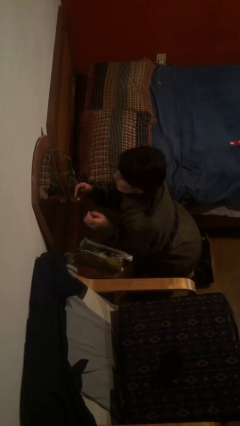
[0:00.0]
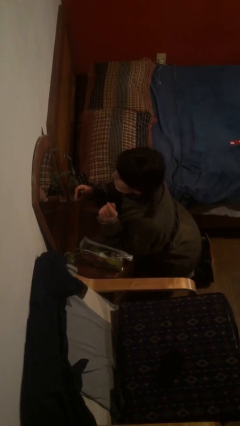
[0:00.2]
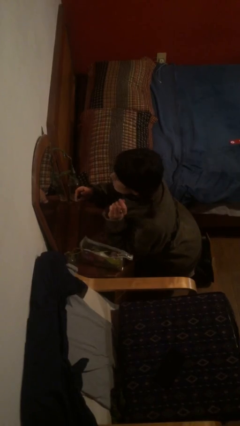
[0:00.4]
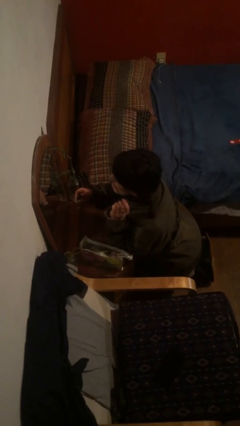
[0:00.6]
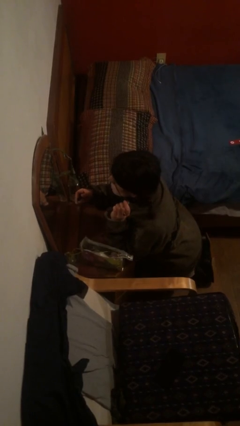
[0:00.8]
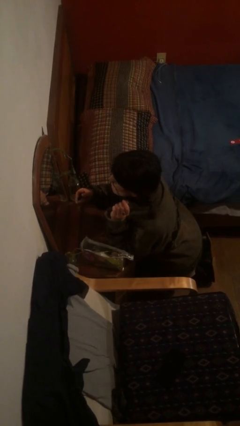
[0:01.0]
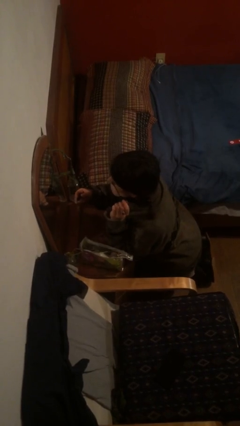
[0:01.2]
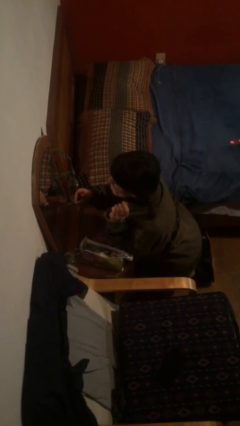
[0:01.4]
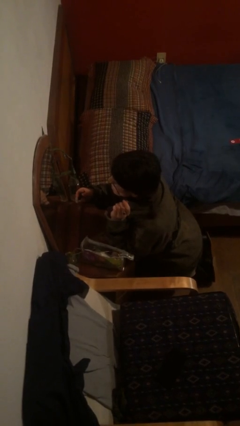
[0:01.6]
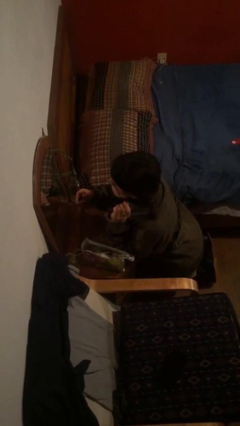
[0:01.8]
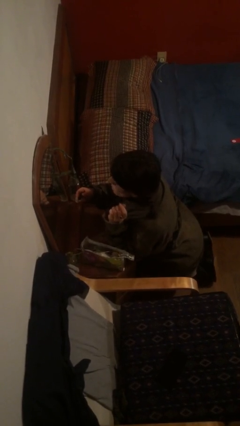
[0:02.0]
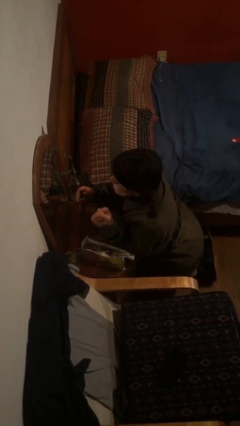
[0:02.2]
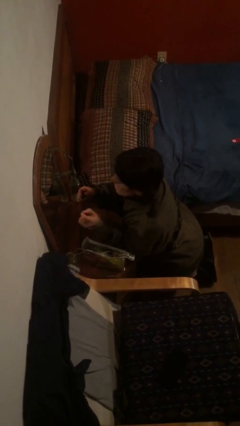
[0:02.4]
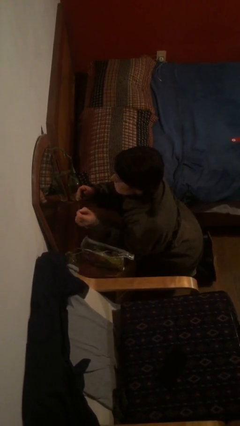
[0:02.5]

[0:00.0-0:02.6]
person applies eye makeup

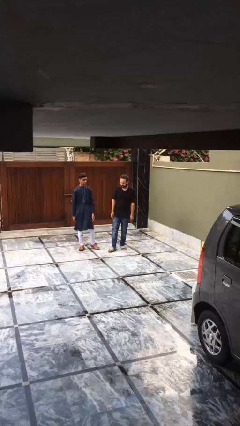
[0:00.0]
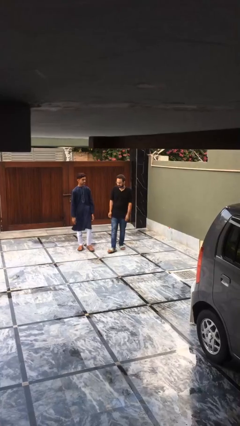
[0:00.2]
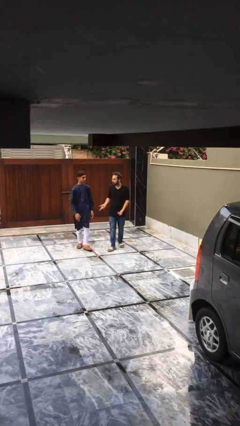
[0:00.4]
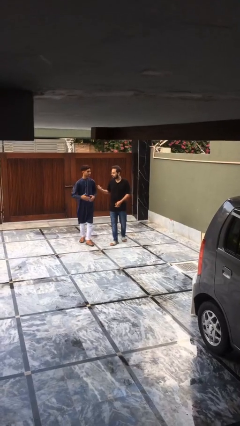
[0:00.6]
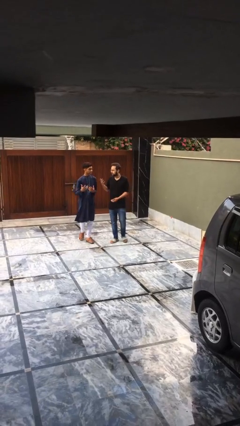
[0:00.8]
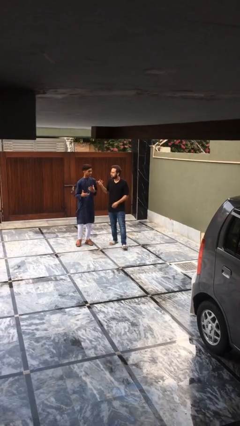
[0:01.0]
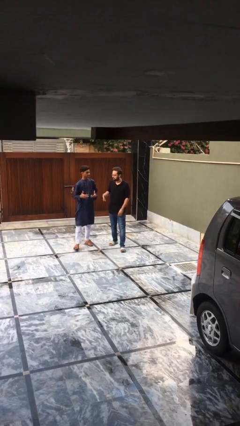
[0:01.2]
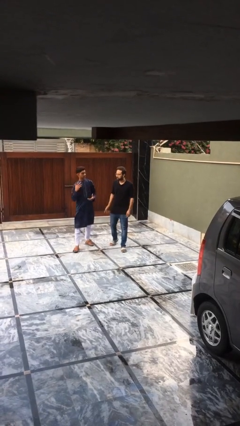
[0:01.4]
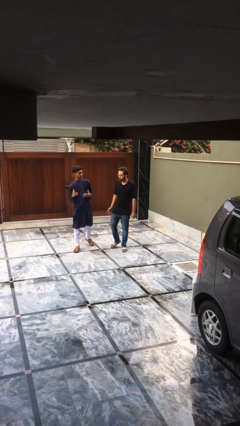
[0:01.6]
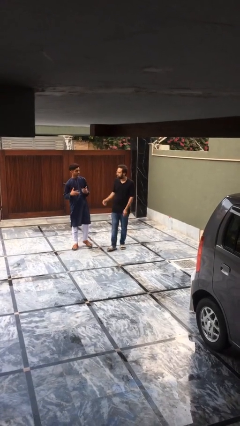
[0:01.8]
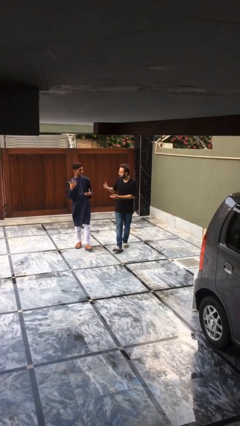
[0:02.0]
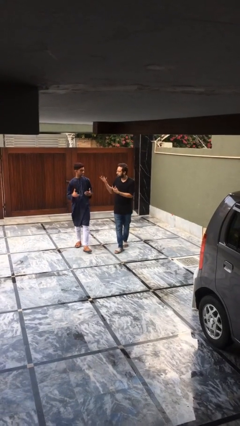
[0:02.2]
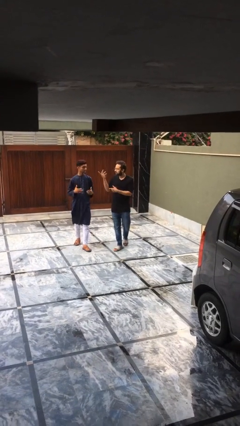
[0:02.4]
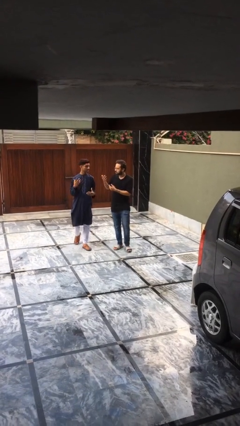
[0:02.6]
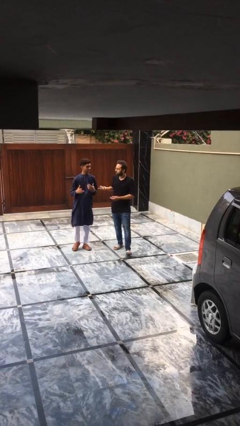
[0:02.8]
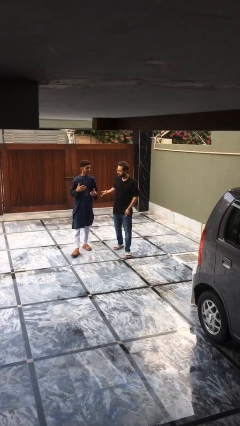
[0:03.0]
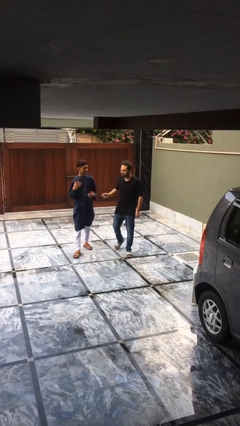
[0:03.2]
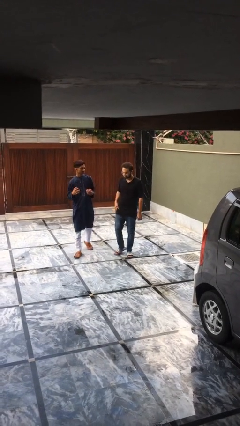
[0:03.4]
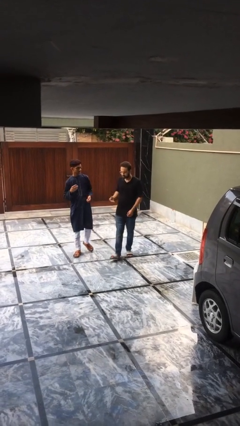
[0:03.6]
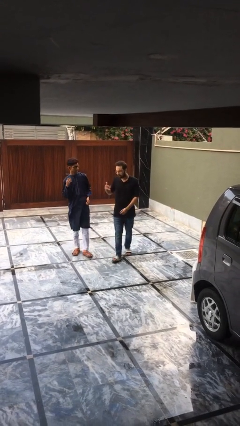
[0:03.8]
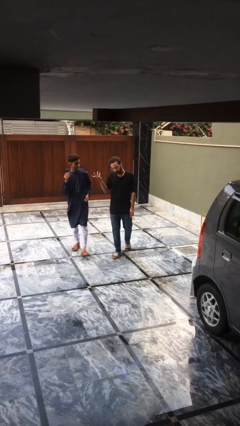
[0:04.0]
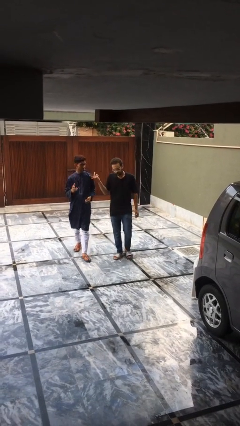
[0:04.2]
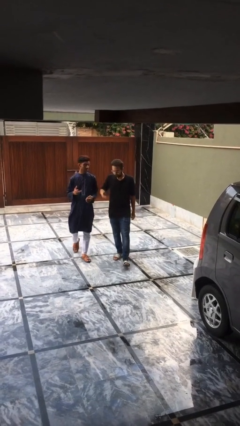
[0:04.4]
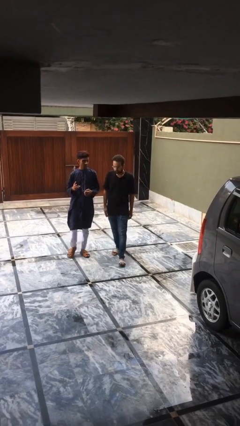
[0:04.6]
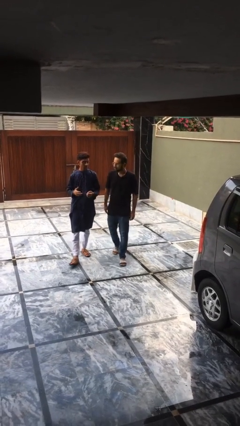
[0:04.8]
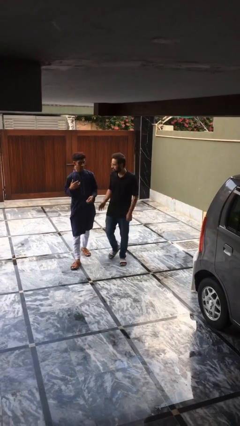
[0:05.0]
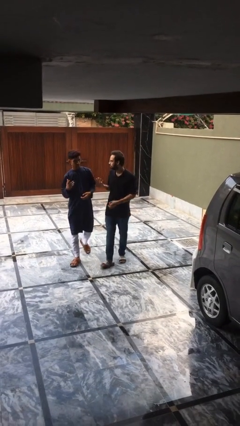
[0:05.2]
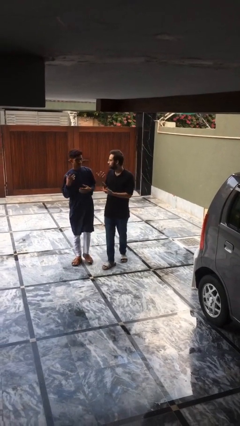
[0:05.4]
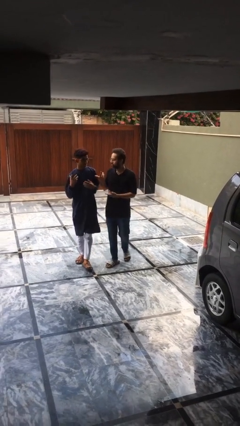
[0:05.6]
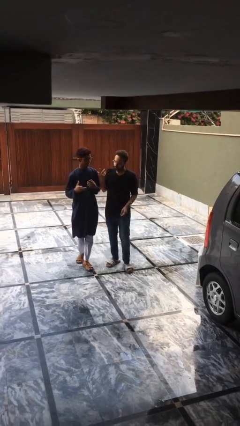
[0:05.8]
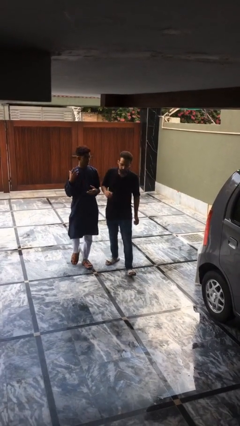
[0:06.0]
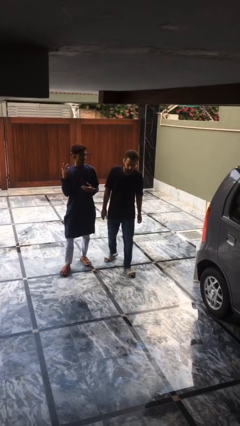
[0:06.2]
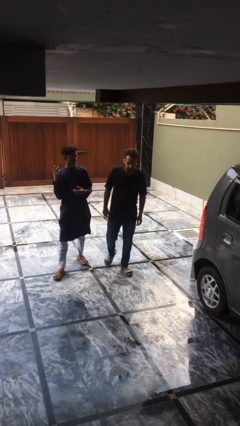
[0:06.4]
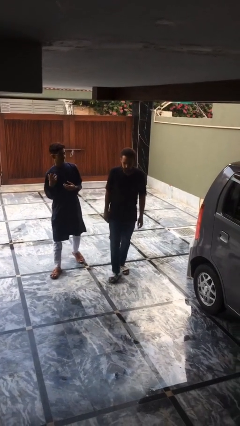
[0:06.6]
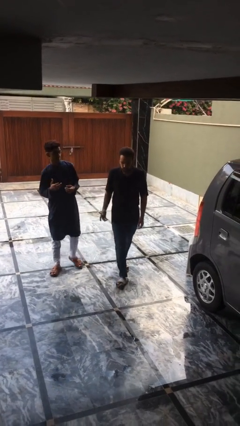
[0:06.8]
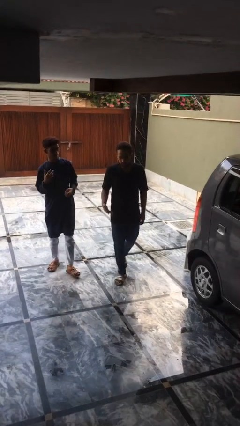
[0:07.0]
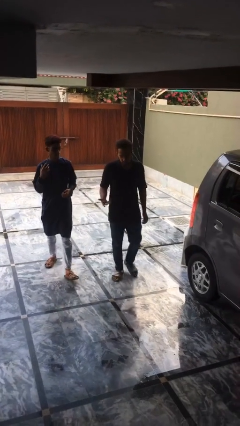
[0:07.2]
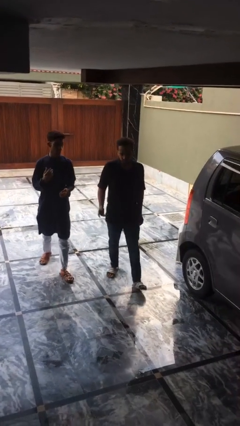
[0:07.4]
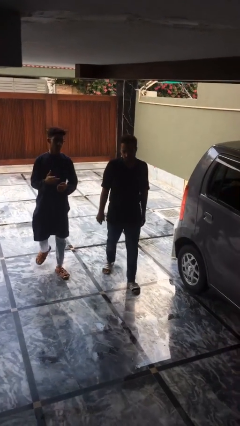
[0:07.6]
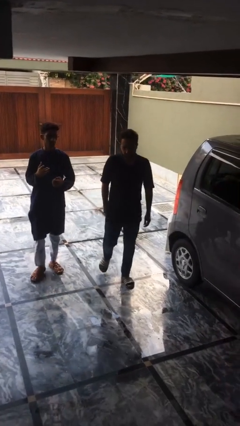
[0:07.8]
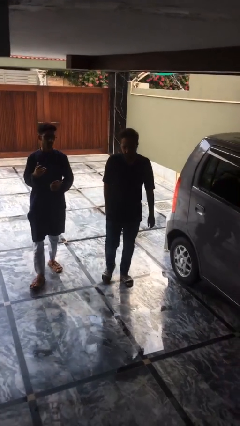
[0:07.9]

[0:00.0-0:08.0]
person talks to person

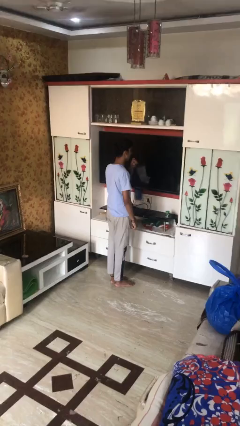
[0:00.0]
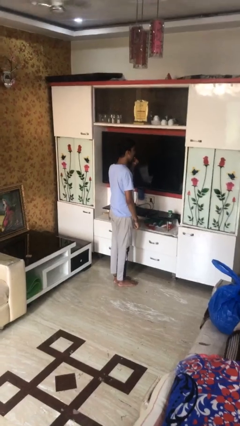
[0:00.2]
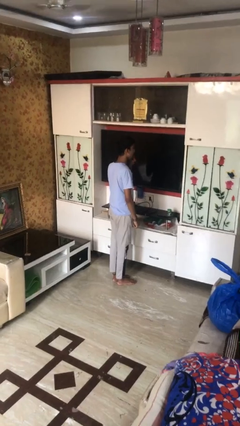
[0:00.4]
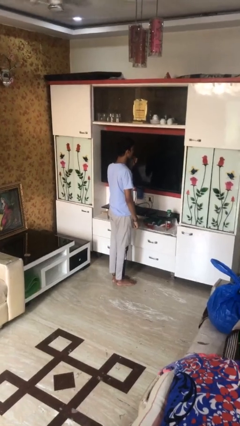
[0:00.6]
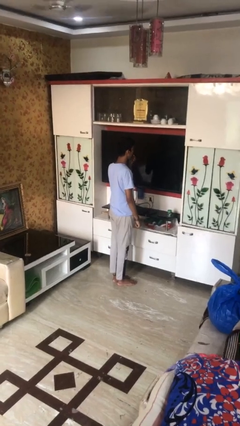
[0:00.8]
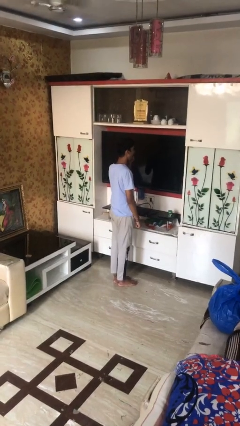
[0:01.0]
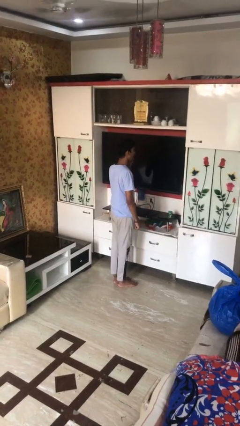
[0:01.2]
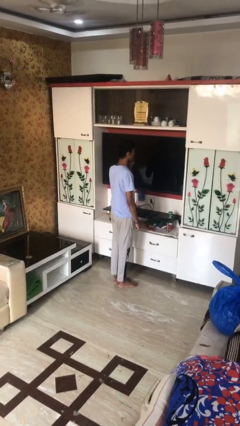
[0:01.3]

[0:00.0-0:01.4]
person licks fingers

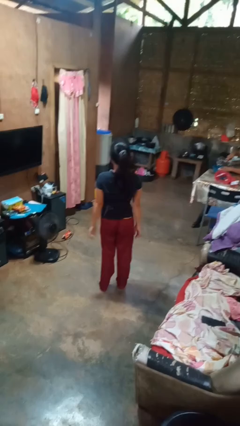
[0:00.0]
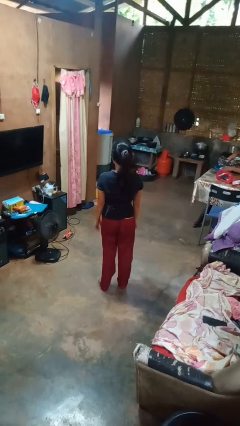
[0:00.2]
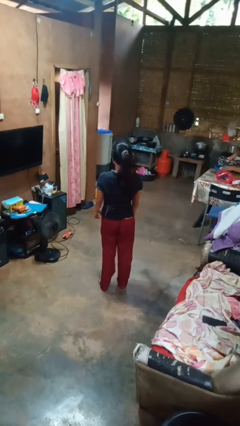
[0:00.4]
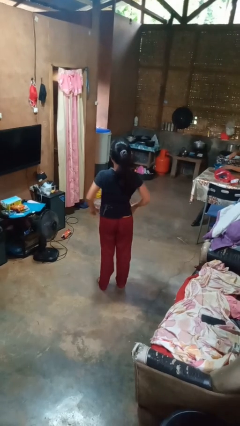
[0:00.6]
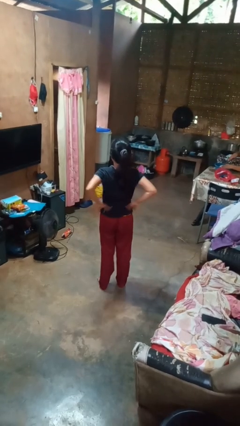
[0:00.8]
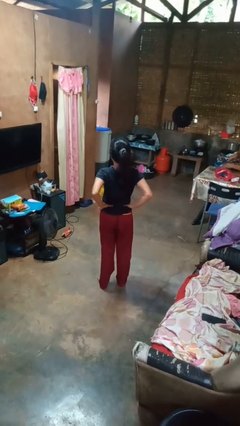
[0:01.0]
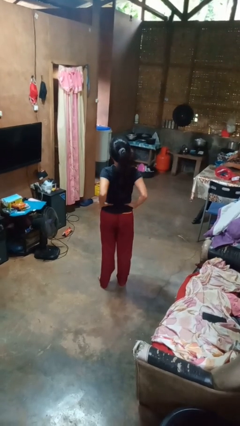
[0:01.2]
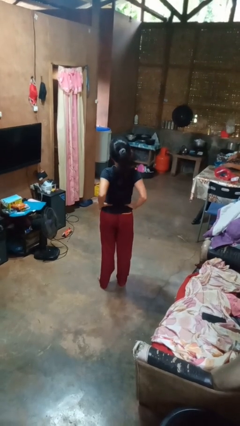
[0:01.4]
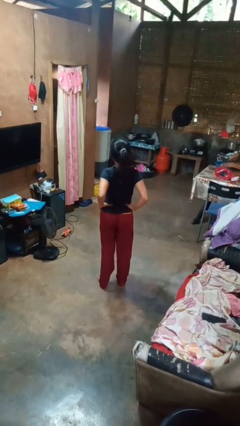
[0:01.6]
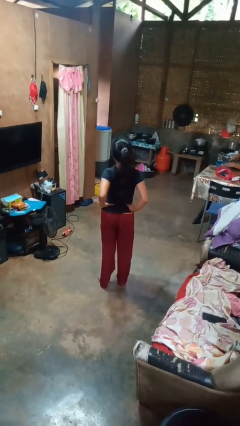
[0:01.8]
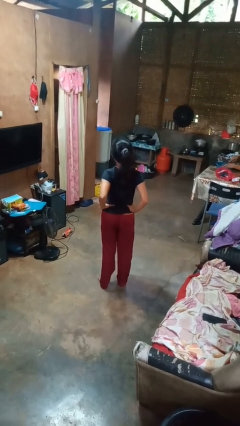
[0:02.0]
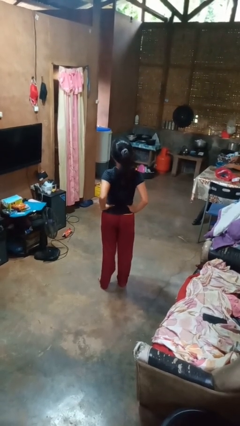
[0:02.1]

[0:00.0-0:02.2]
person stretches back

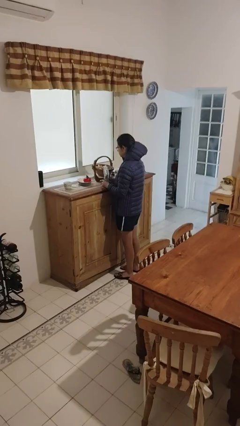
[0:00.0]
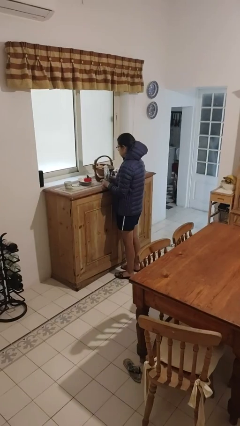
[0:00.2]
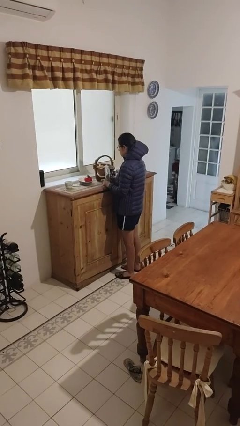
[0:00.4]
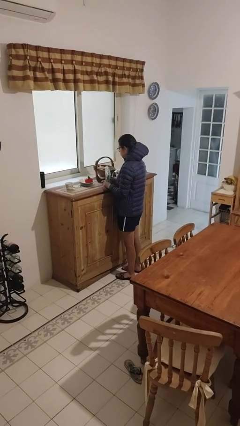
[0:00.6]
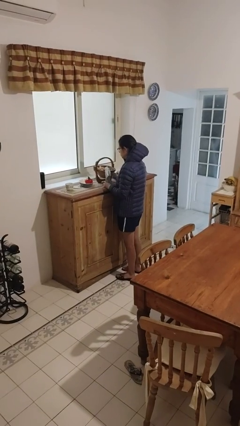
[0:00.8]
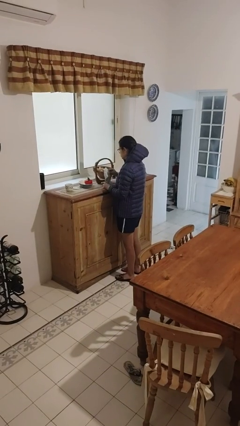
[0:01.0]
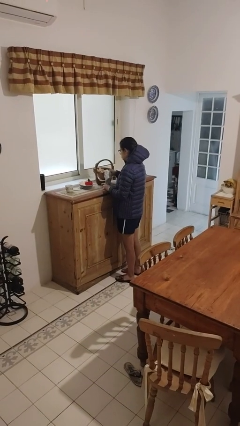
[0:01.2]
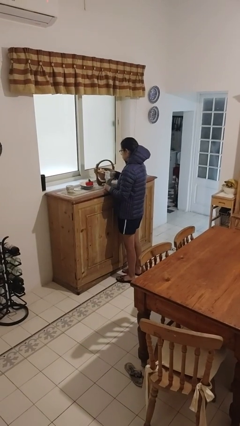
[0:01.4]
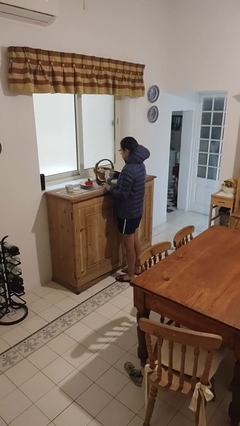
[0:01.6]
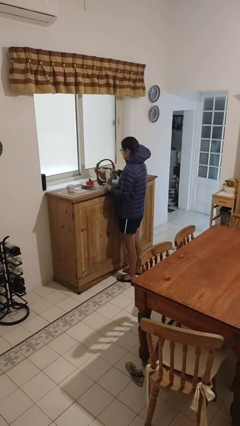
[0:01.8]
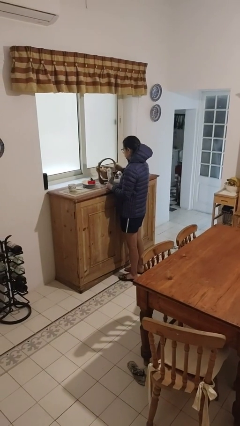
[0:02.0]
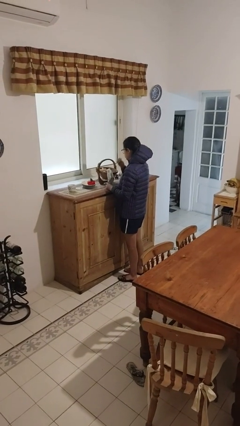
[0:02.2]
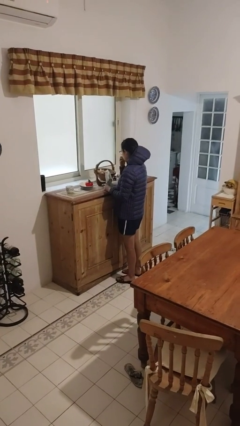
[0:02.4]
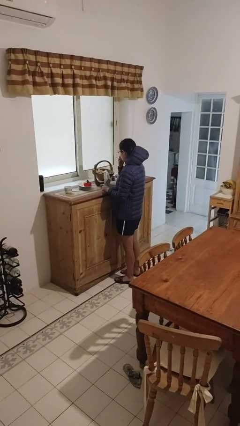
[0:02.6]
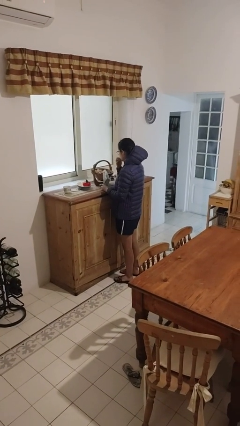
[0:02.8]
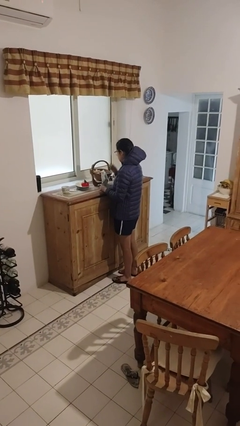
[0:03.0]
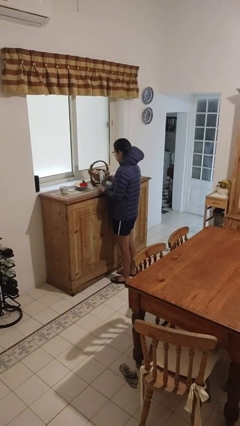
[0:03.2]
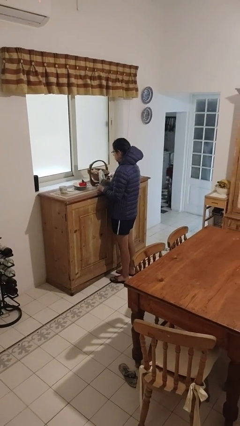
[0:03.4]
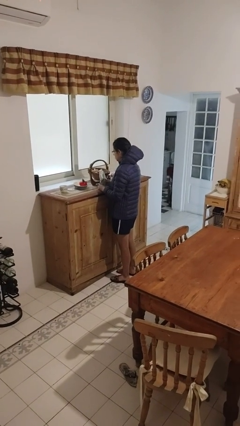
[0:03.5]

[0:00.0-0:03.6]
person eats snack from bag
